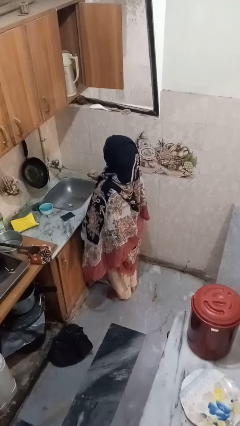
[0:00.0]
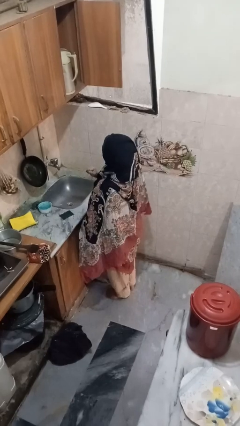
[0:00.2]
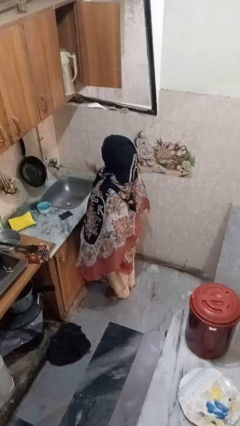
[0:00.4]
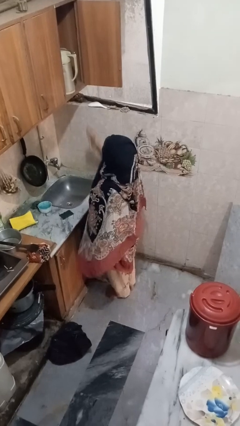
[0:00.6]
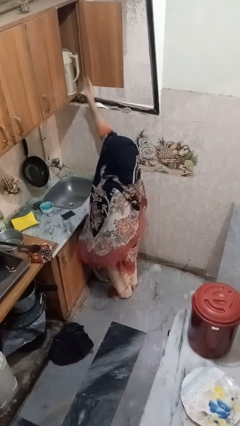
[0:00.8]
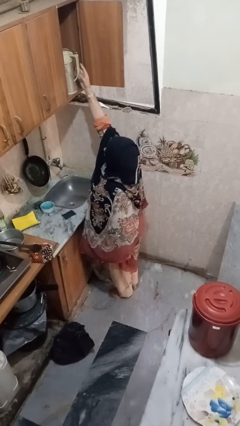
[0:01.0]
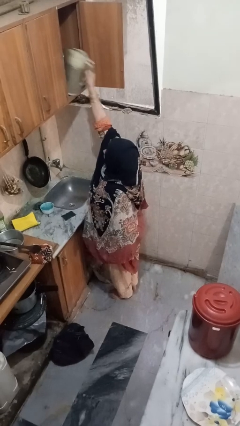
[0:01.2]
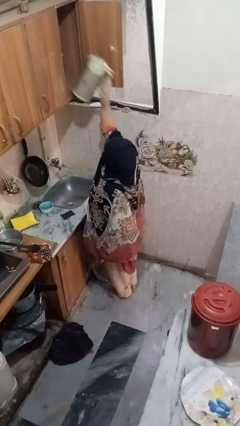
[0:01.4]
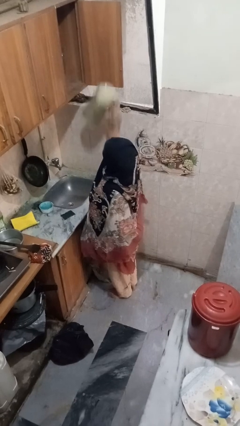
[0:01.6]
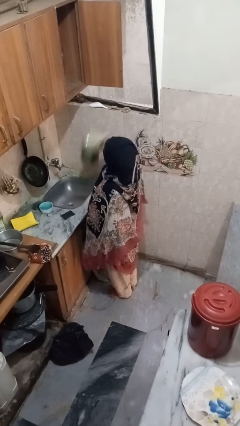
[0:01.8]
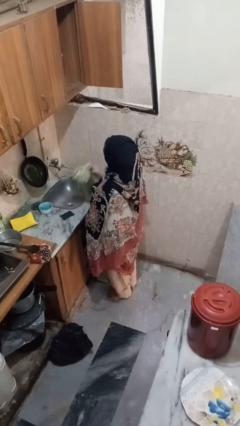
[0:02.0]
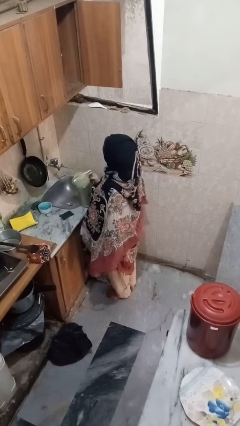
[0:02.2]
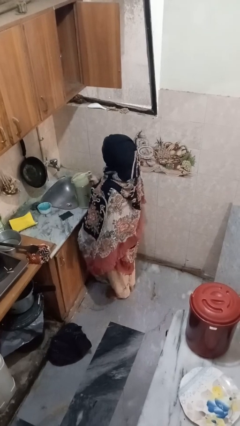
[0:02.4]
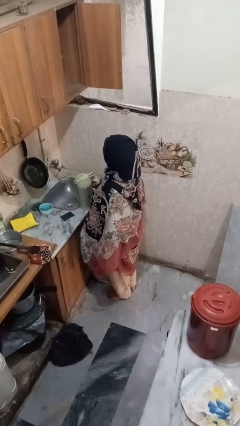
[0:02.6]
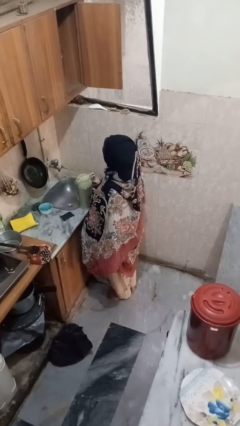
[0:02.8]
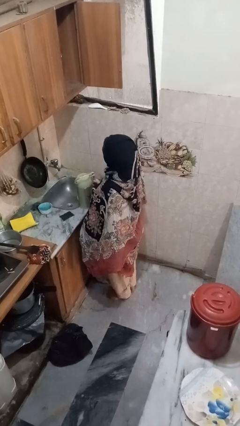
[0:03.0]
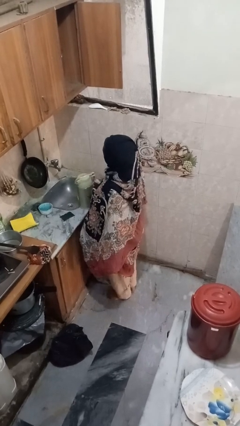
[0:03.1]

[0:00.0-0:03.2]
person puts object in cabinet

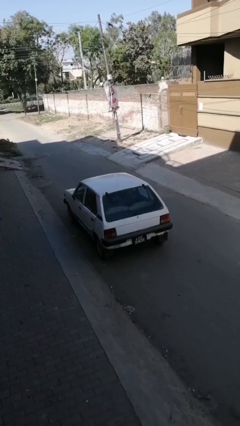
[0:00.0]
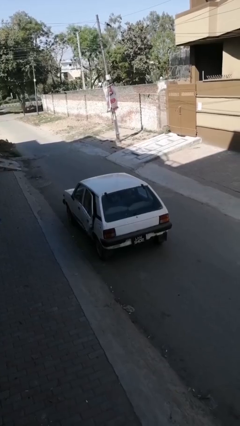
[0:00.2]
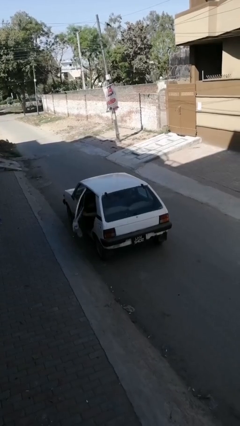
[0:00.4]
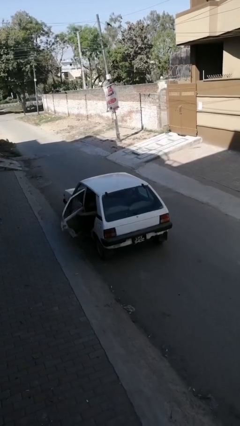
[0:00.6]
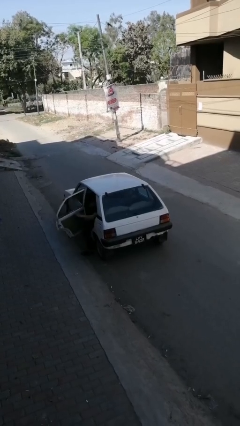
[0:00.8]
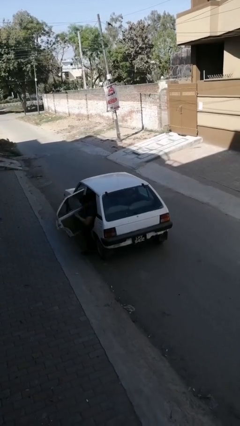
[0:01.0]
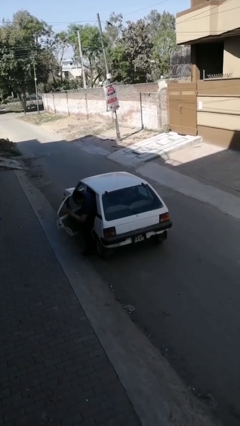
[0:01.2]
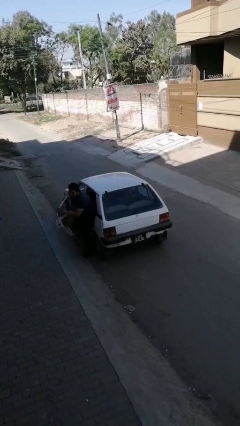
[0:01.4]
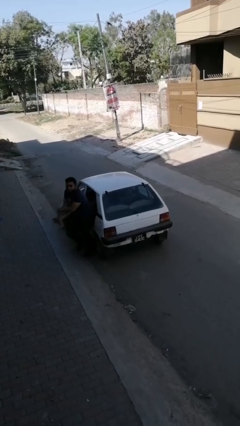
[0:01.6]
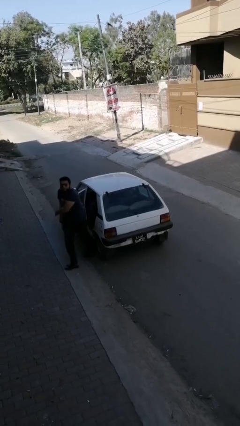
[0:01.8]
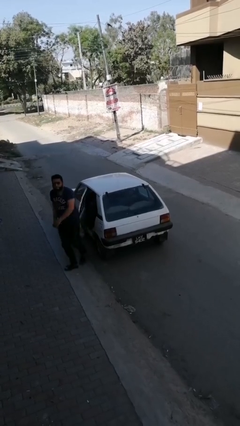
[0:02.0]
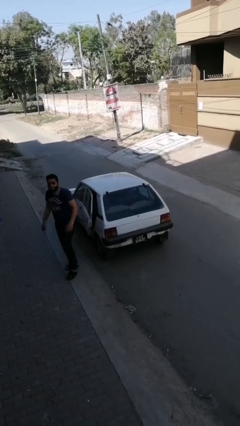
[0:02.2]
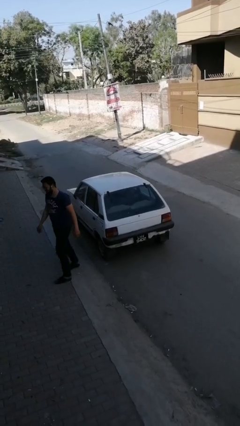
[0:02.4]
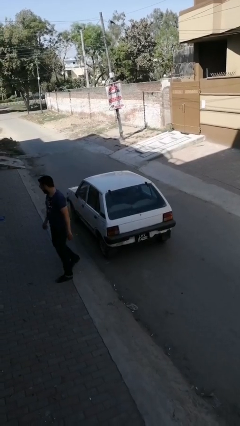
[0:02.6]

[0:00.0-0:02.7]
car drops off person

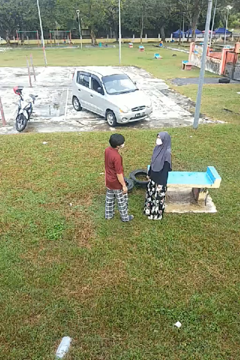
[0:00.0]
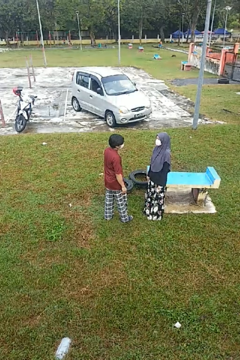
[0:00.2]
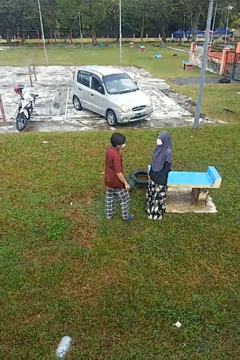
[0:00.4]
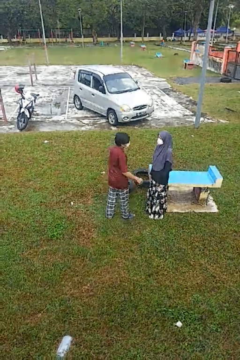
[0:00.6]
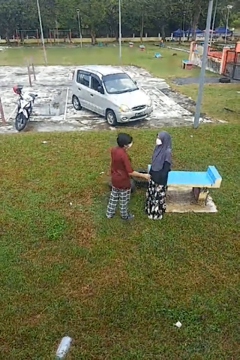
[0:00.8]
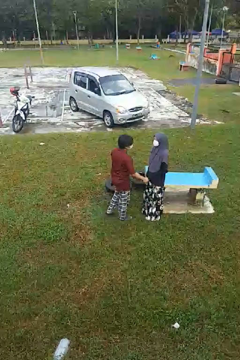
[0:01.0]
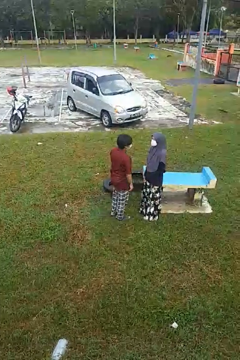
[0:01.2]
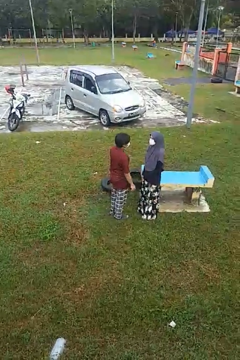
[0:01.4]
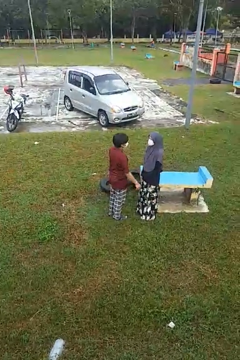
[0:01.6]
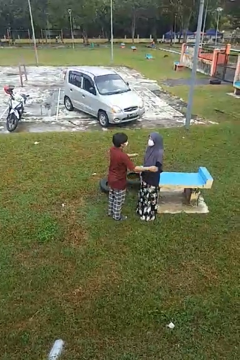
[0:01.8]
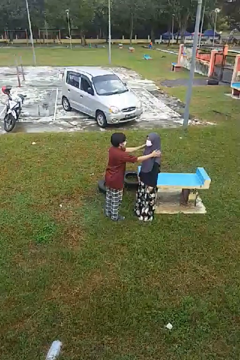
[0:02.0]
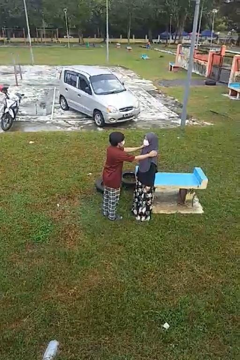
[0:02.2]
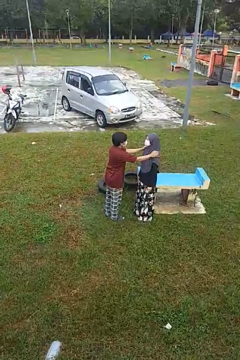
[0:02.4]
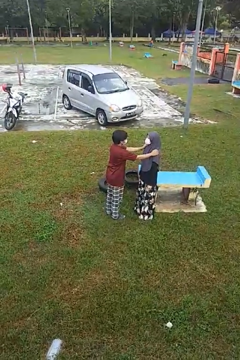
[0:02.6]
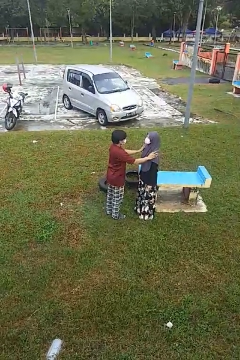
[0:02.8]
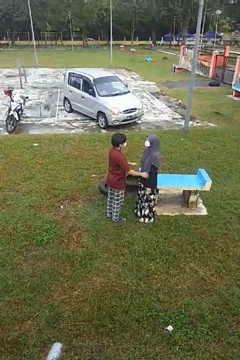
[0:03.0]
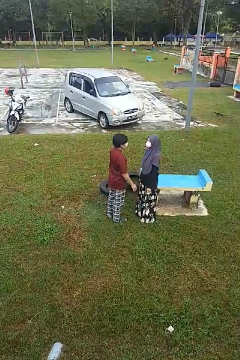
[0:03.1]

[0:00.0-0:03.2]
person pounds shoulders of person

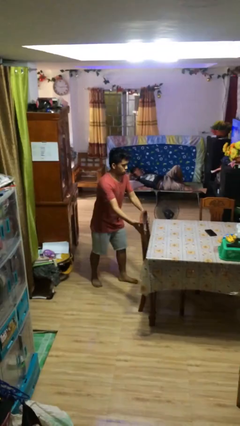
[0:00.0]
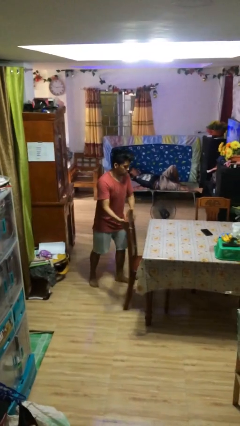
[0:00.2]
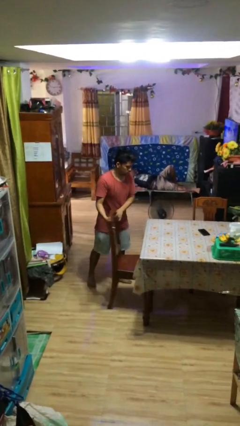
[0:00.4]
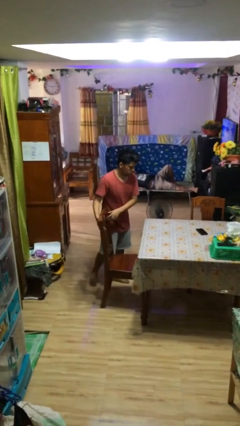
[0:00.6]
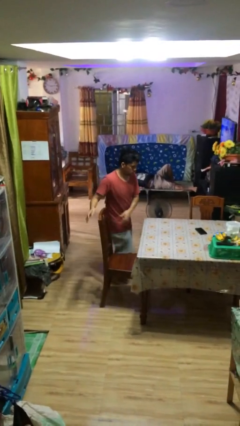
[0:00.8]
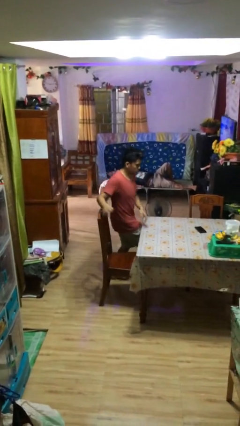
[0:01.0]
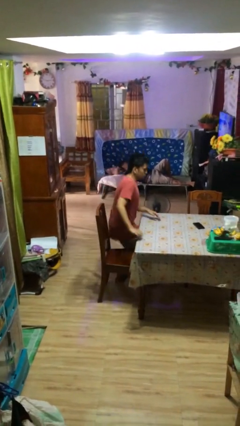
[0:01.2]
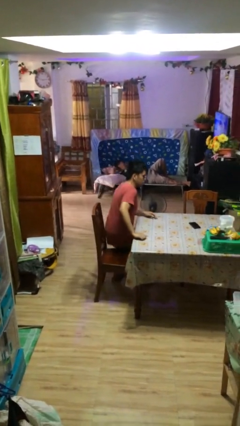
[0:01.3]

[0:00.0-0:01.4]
person stands up

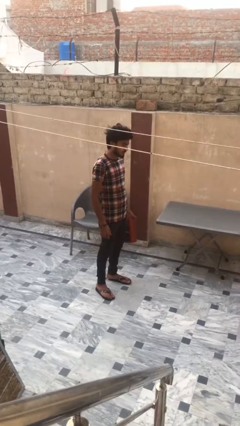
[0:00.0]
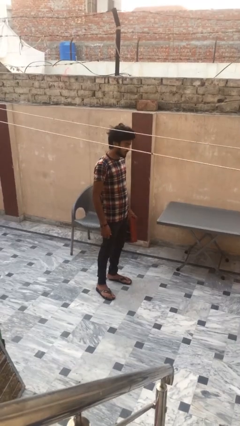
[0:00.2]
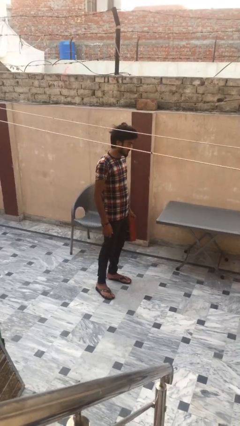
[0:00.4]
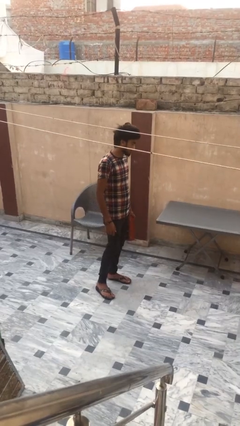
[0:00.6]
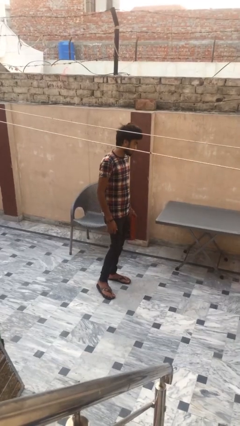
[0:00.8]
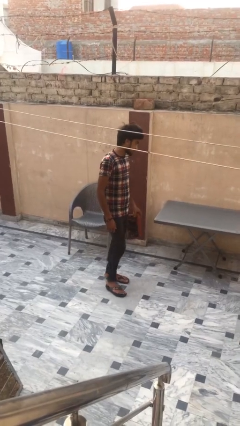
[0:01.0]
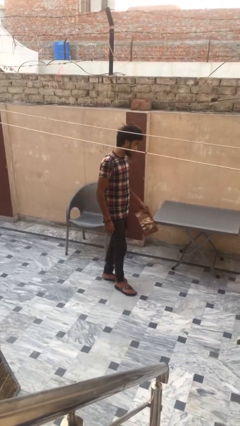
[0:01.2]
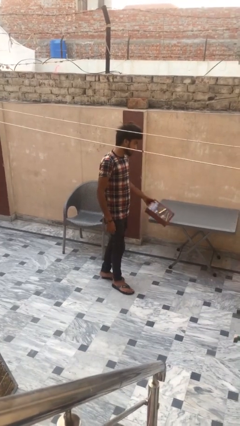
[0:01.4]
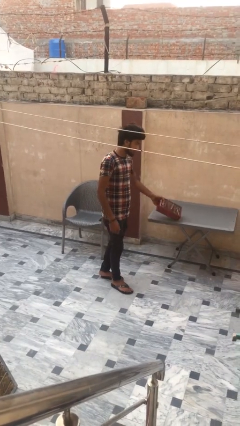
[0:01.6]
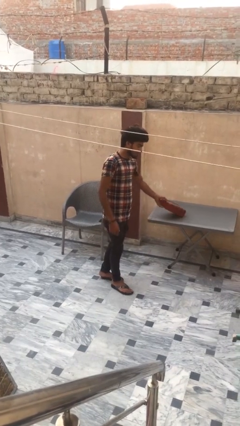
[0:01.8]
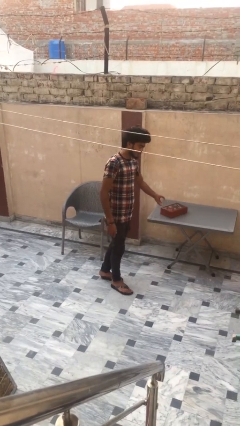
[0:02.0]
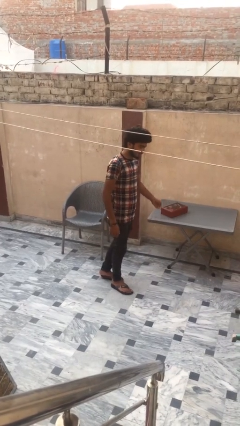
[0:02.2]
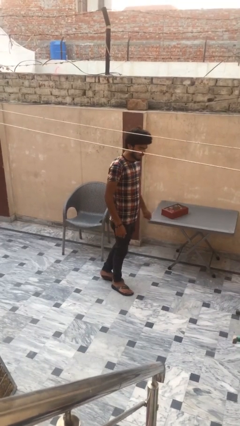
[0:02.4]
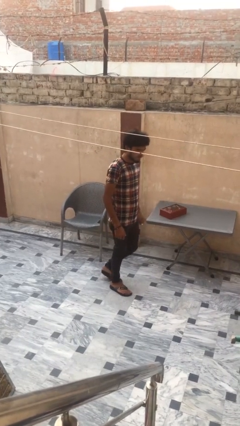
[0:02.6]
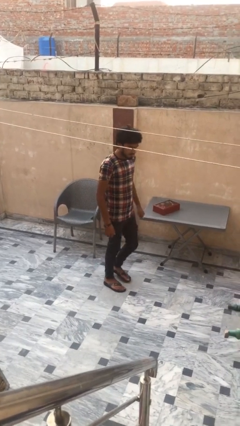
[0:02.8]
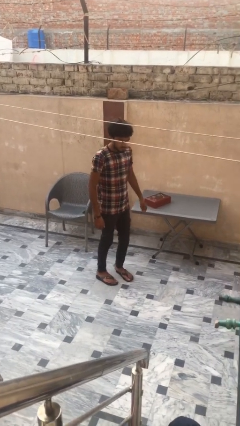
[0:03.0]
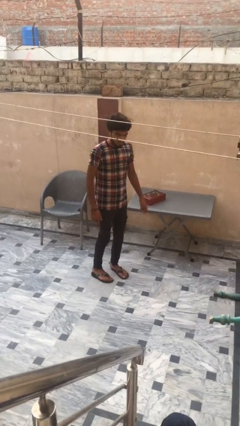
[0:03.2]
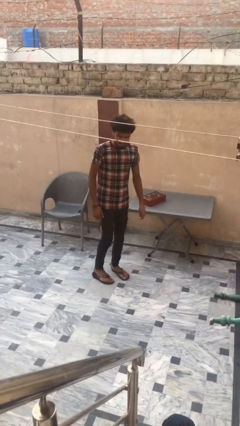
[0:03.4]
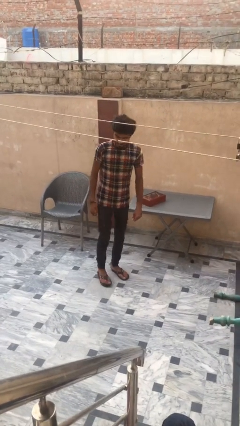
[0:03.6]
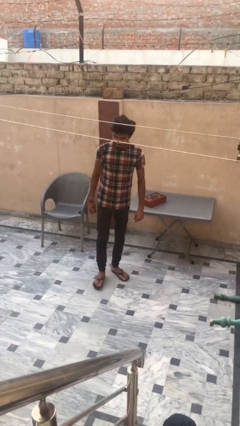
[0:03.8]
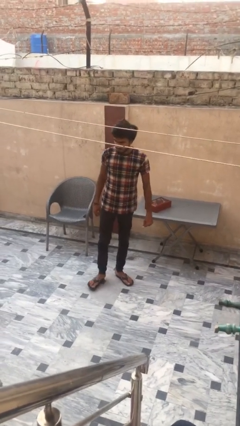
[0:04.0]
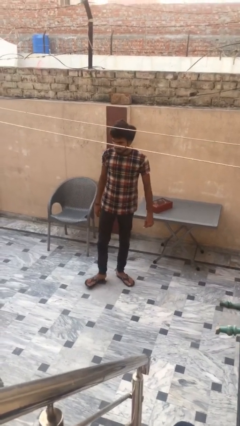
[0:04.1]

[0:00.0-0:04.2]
person puts down object on table

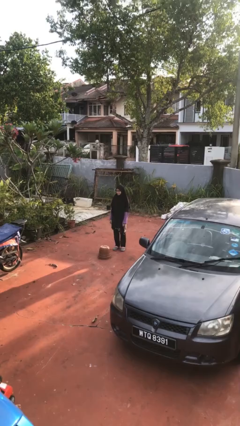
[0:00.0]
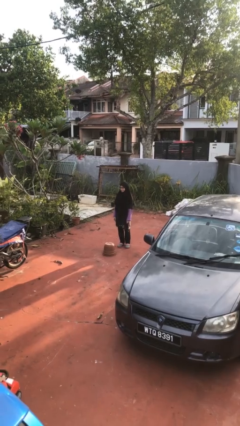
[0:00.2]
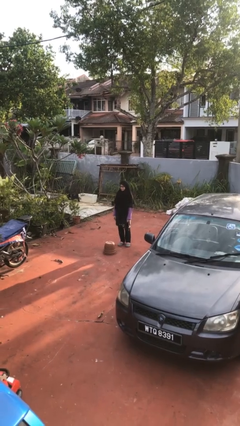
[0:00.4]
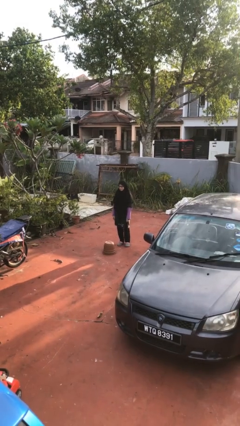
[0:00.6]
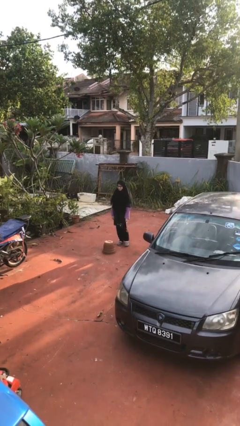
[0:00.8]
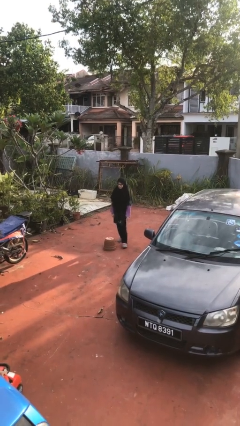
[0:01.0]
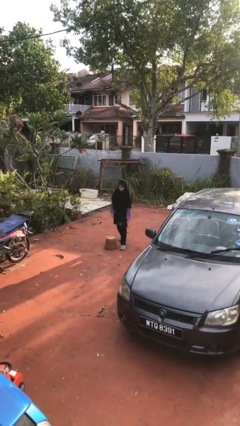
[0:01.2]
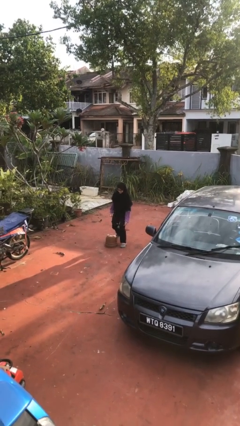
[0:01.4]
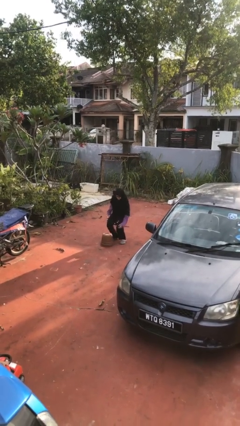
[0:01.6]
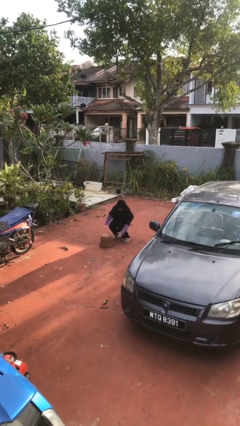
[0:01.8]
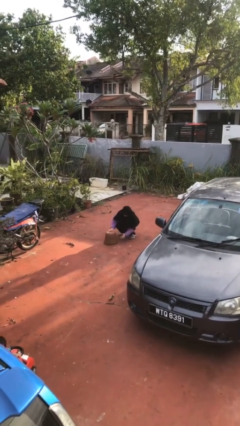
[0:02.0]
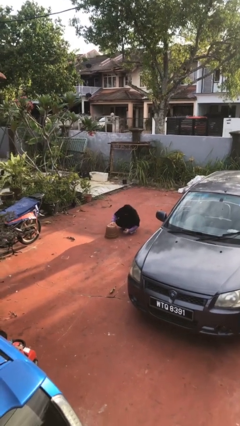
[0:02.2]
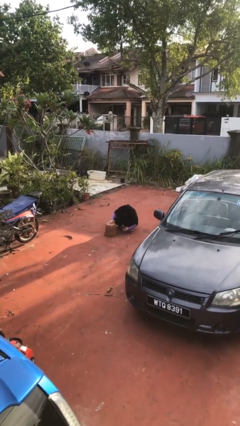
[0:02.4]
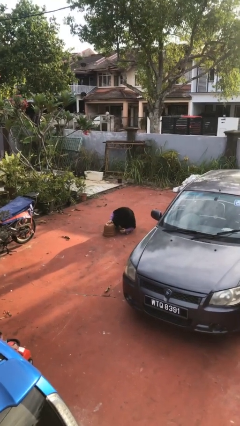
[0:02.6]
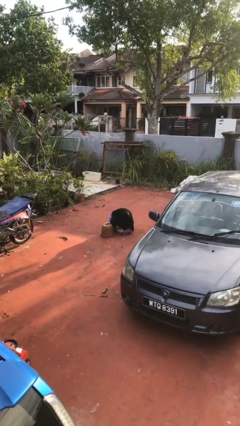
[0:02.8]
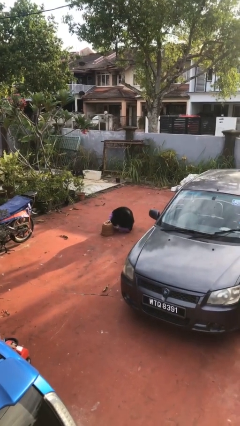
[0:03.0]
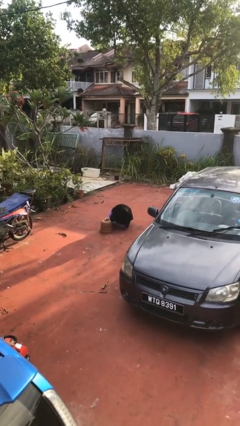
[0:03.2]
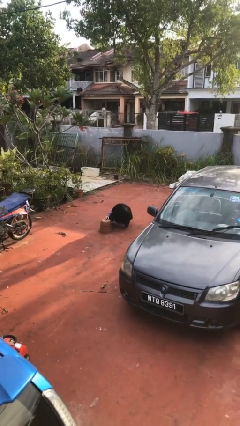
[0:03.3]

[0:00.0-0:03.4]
person trips on object on floor
